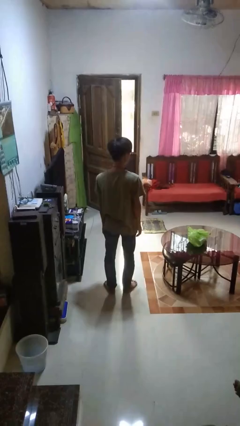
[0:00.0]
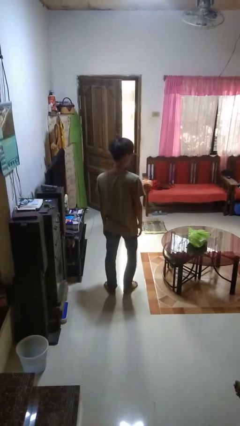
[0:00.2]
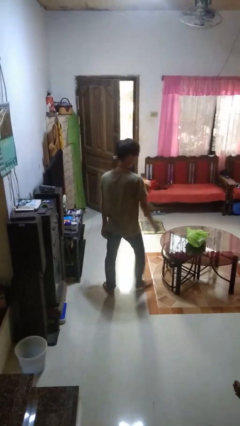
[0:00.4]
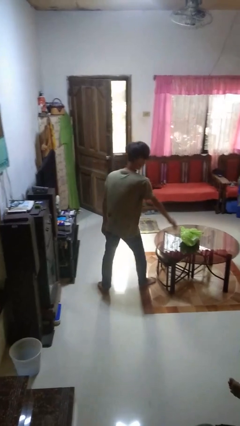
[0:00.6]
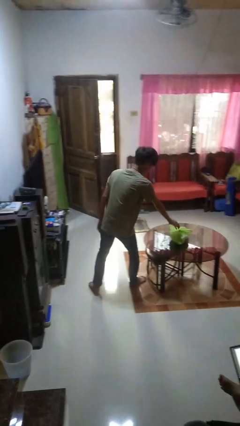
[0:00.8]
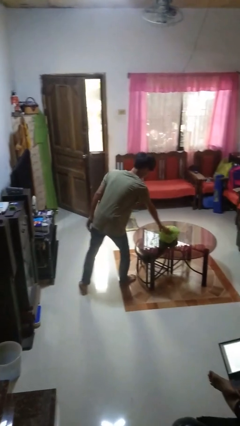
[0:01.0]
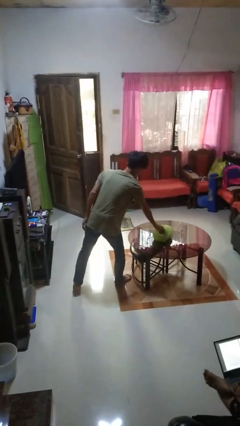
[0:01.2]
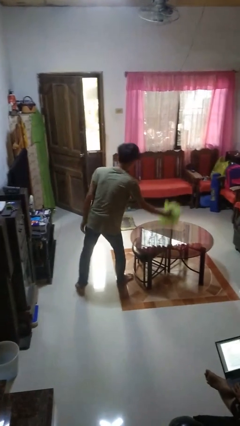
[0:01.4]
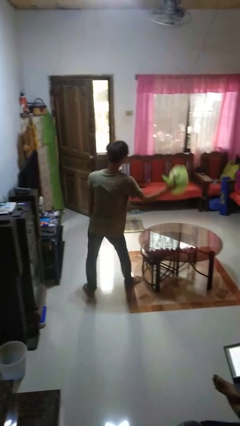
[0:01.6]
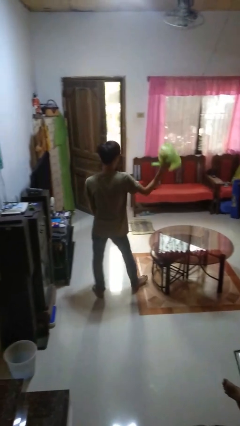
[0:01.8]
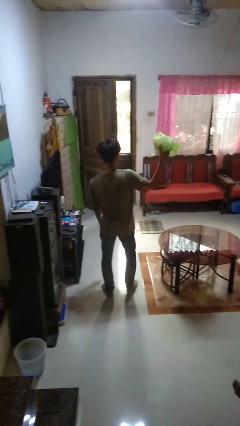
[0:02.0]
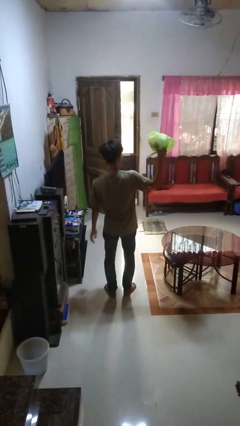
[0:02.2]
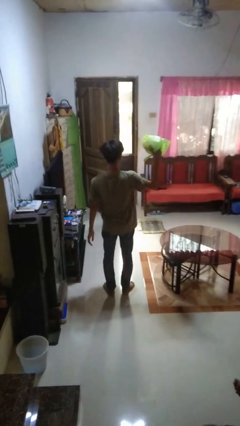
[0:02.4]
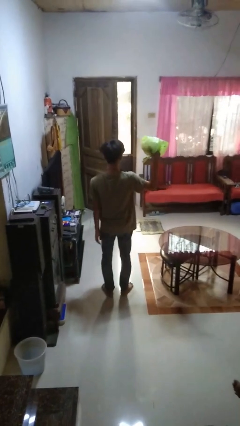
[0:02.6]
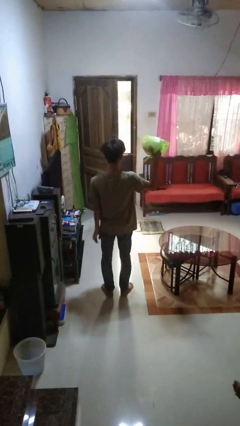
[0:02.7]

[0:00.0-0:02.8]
person picks up object from table

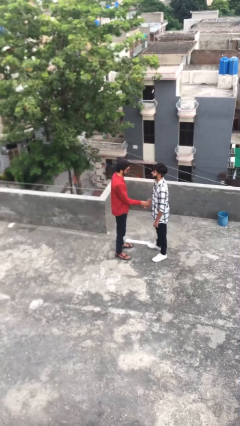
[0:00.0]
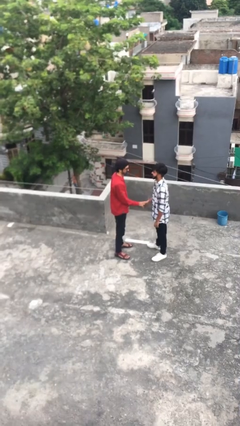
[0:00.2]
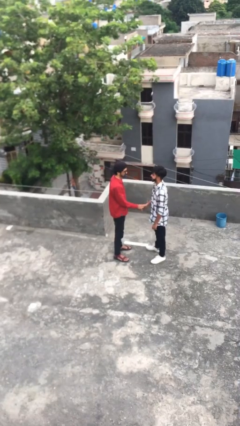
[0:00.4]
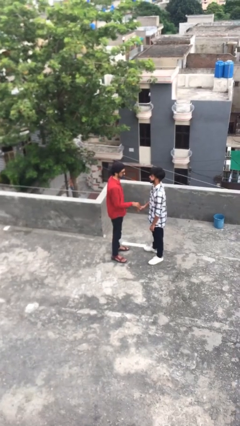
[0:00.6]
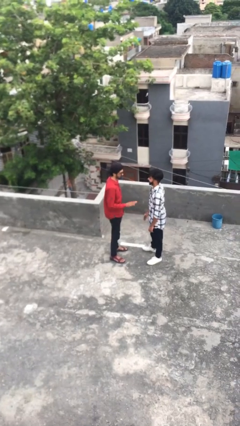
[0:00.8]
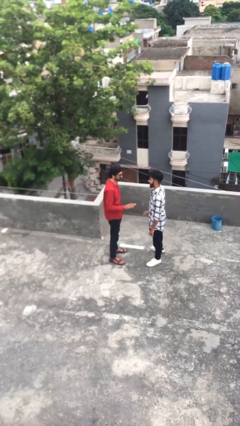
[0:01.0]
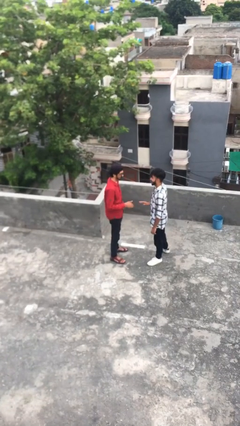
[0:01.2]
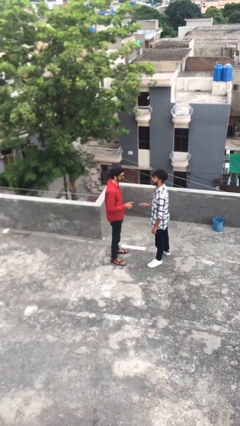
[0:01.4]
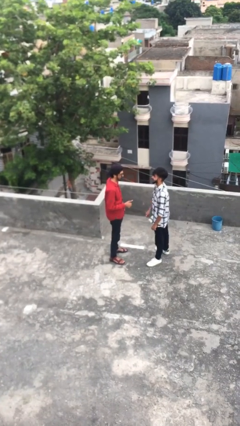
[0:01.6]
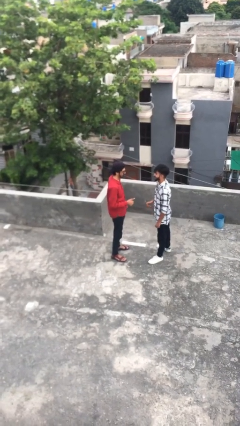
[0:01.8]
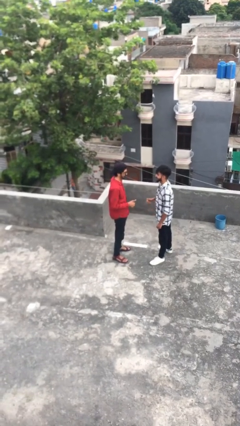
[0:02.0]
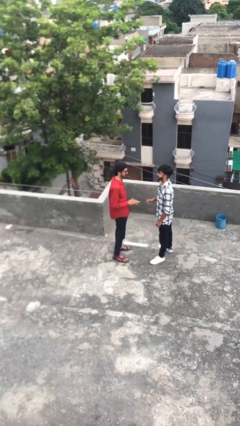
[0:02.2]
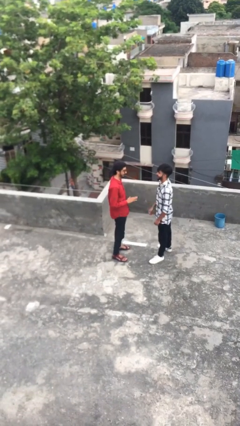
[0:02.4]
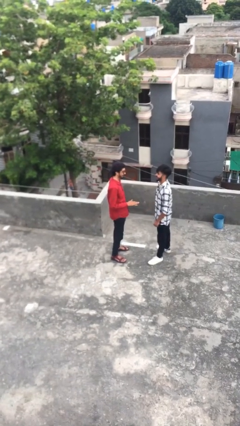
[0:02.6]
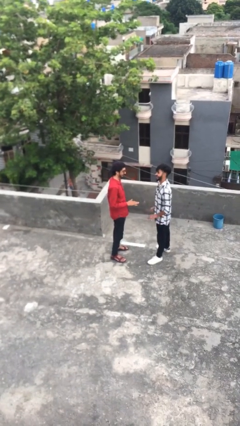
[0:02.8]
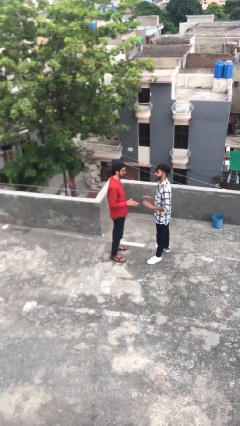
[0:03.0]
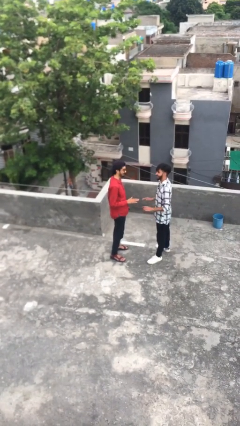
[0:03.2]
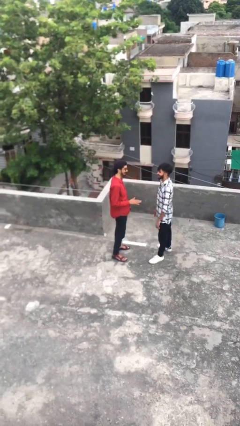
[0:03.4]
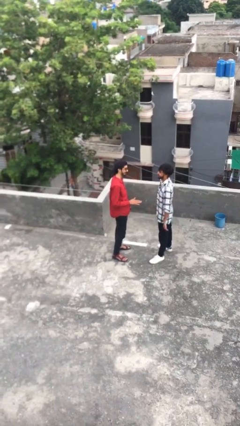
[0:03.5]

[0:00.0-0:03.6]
person talks to person

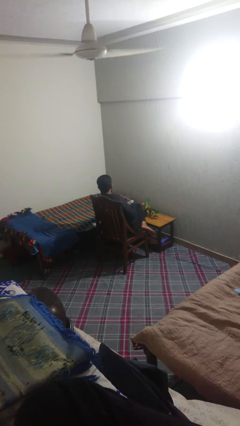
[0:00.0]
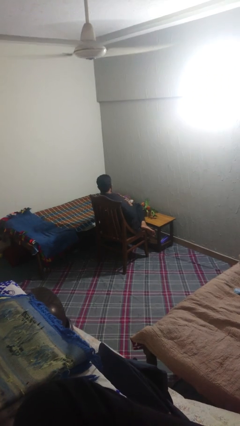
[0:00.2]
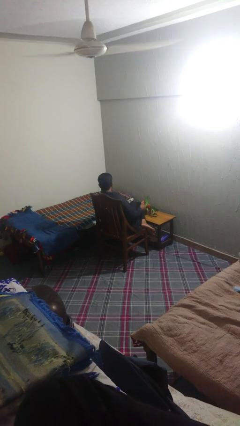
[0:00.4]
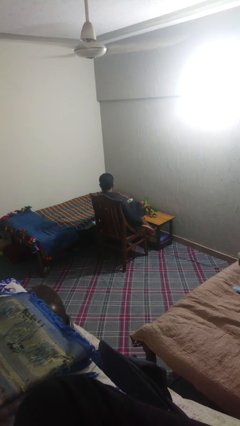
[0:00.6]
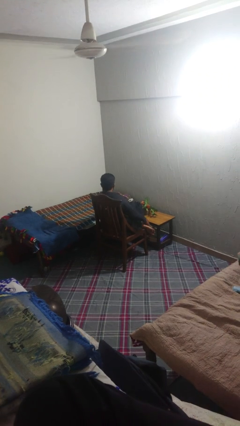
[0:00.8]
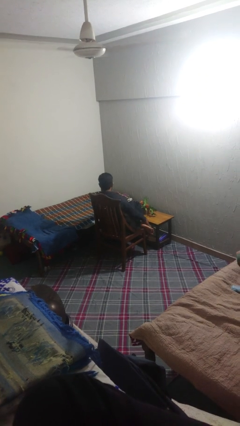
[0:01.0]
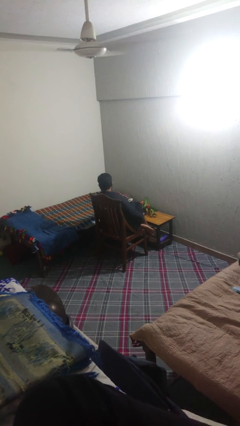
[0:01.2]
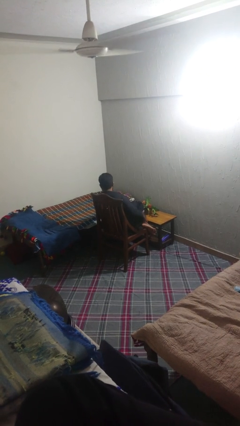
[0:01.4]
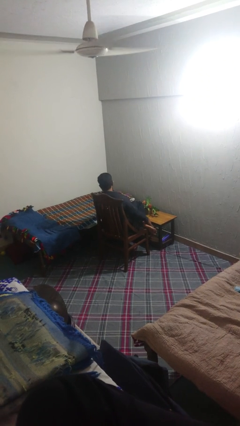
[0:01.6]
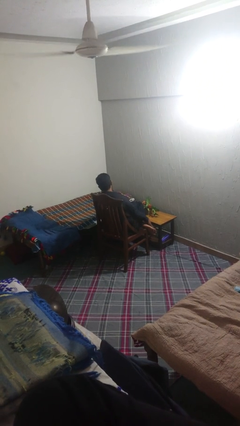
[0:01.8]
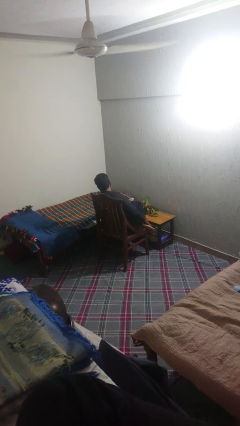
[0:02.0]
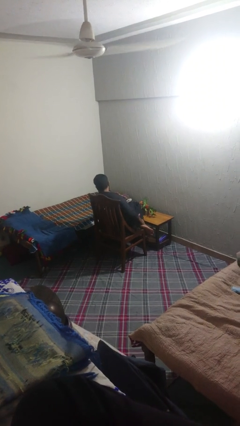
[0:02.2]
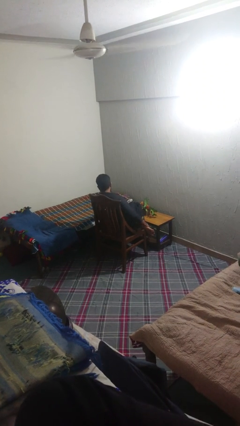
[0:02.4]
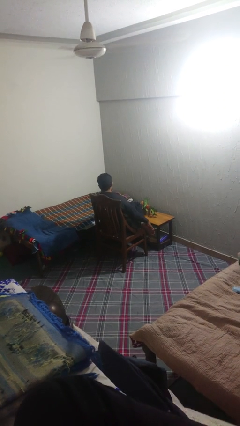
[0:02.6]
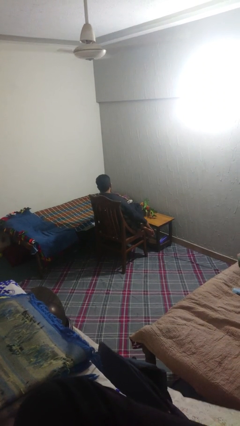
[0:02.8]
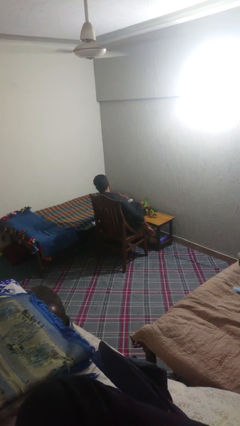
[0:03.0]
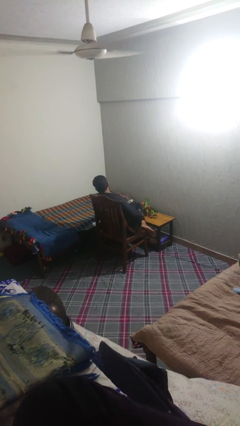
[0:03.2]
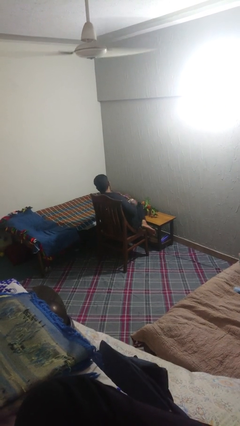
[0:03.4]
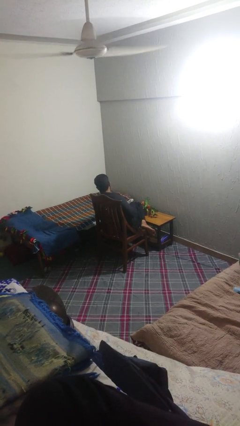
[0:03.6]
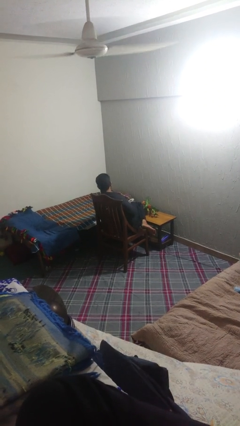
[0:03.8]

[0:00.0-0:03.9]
person rubs foot

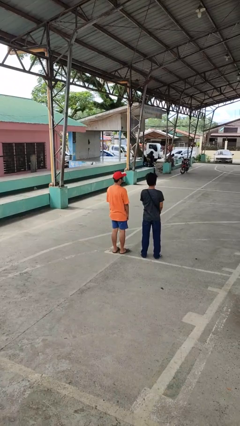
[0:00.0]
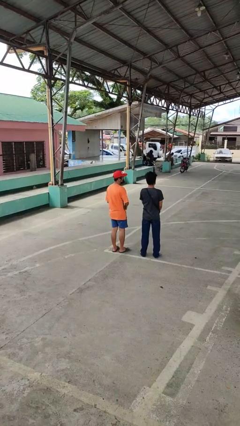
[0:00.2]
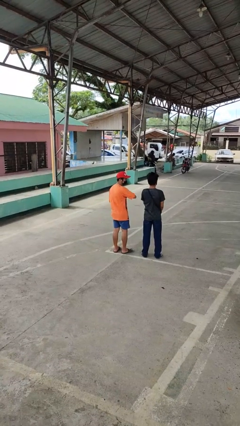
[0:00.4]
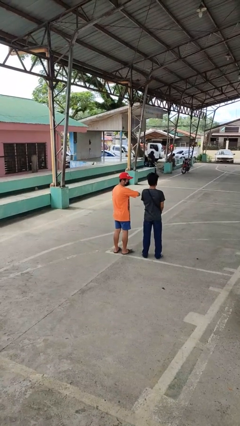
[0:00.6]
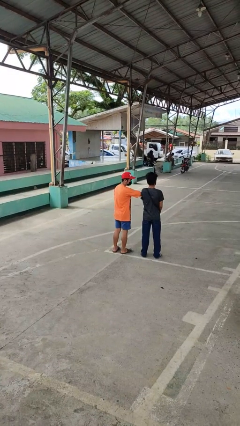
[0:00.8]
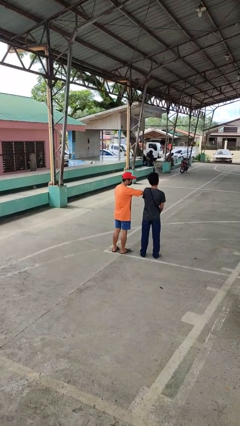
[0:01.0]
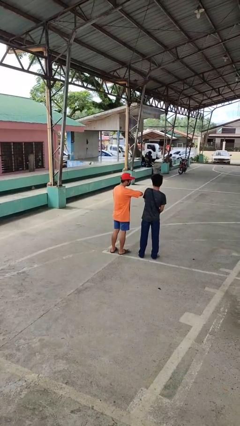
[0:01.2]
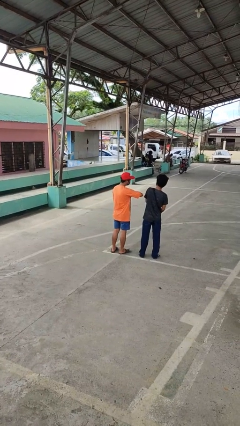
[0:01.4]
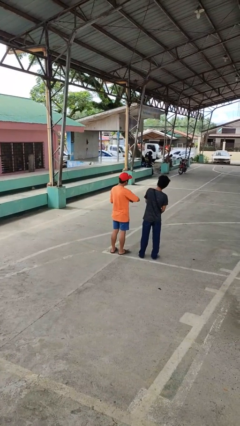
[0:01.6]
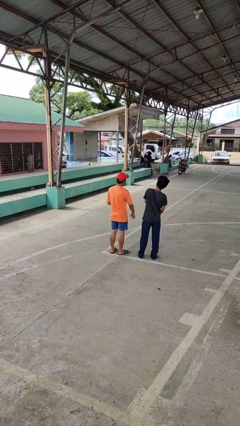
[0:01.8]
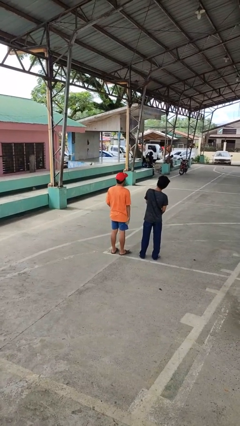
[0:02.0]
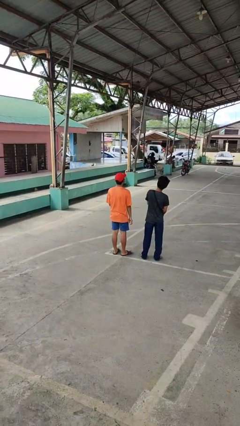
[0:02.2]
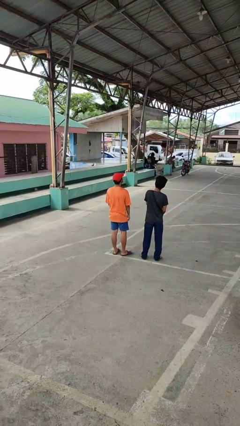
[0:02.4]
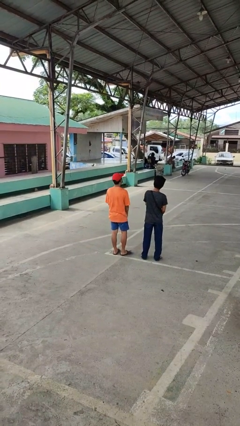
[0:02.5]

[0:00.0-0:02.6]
person nudges person with elbow

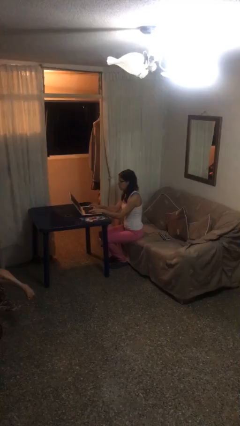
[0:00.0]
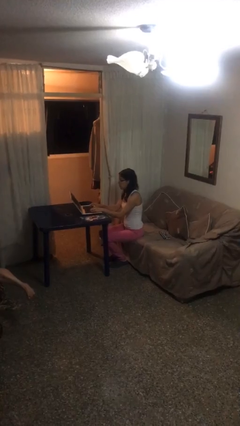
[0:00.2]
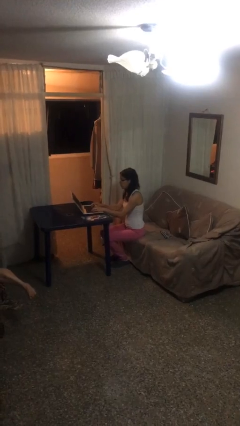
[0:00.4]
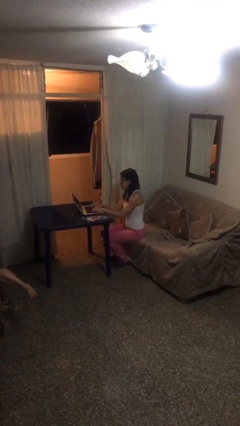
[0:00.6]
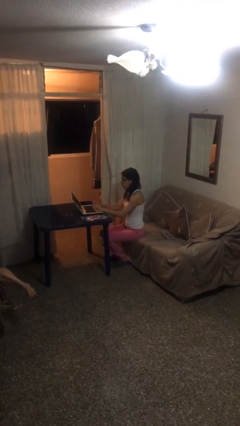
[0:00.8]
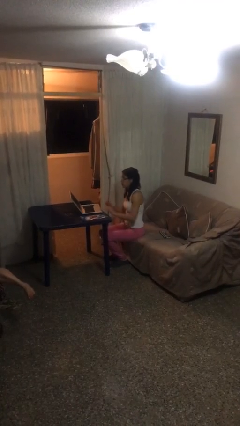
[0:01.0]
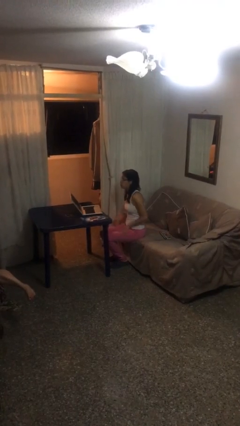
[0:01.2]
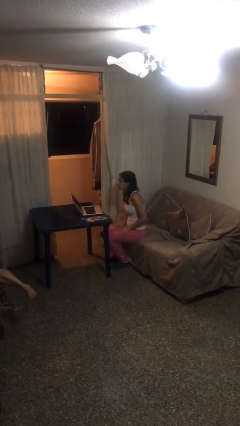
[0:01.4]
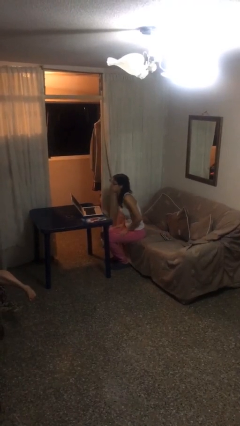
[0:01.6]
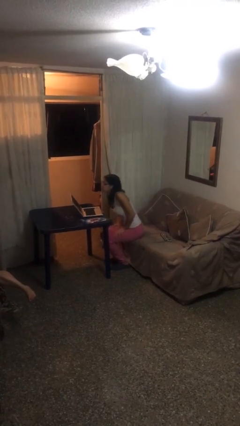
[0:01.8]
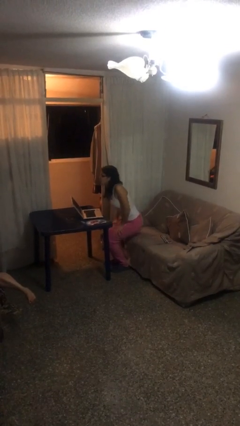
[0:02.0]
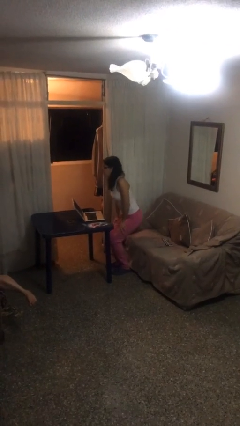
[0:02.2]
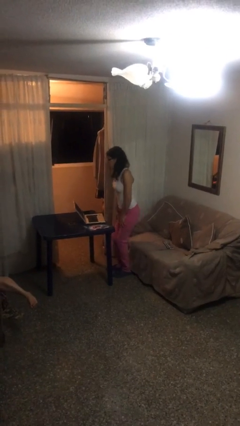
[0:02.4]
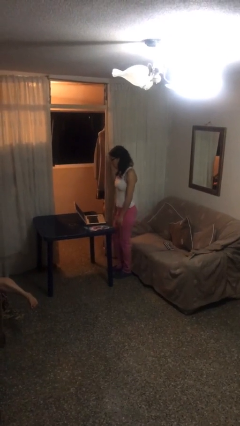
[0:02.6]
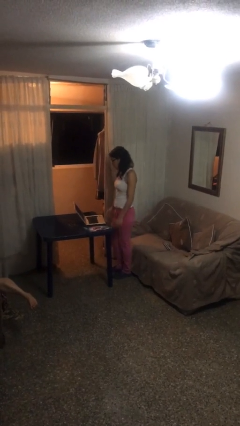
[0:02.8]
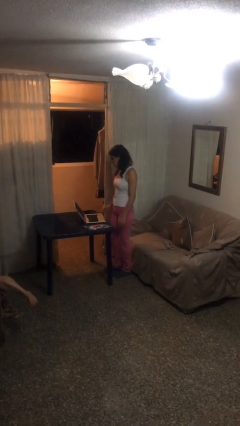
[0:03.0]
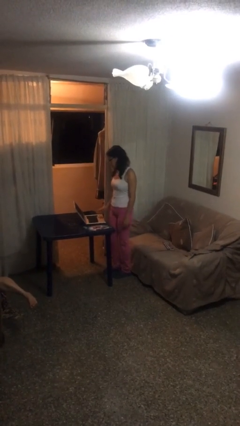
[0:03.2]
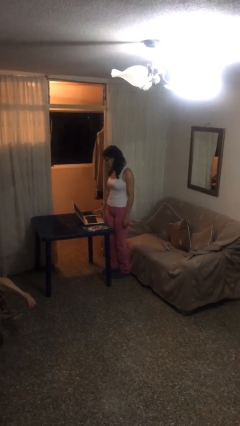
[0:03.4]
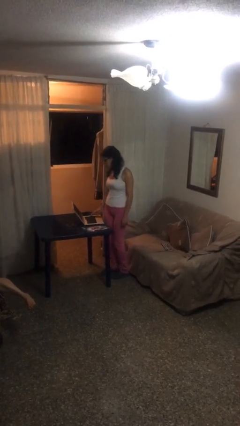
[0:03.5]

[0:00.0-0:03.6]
person stands up

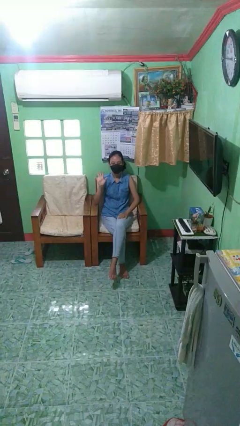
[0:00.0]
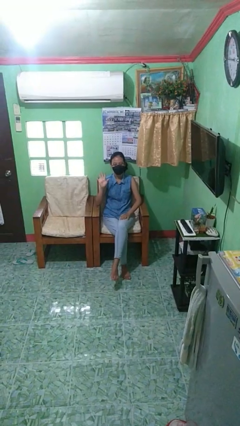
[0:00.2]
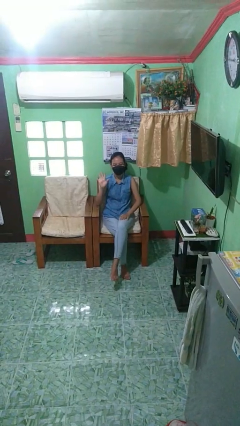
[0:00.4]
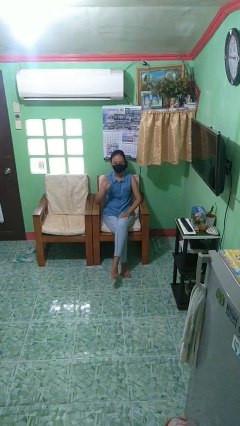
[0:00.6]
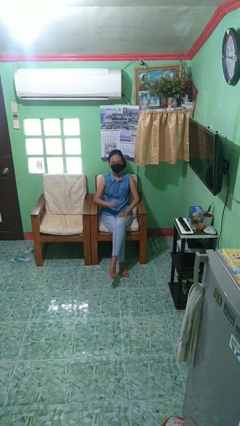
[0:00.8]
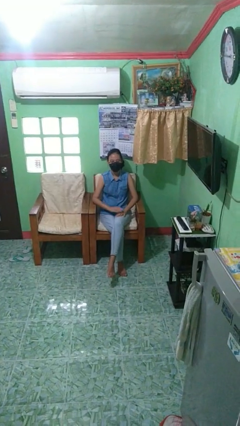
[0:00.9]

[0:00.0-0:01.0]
person gestures number five
